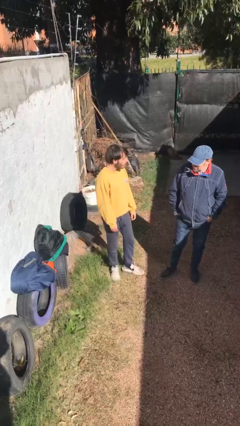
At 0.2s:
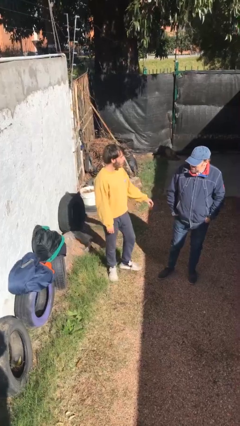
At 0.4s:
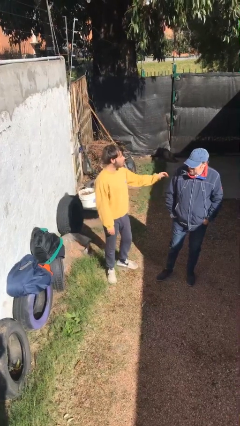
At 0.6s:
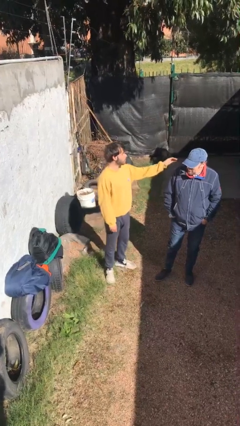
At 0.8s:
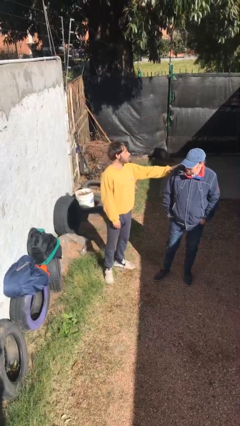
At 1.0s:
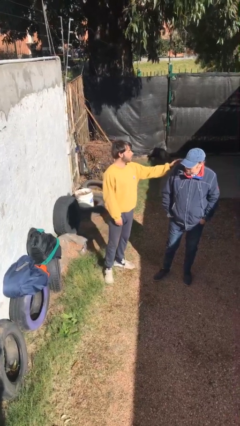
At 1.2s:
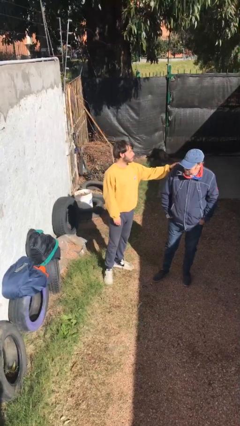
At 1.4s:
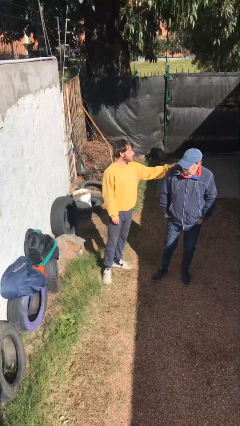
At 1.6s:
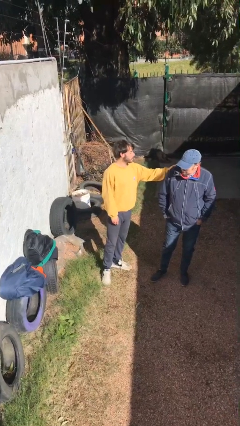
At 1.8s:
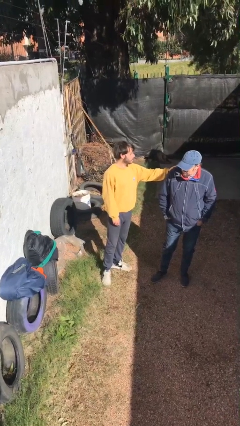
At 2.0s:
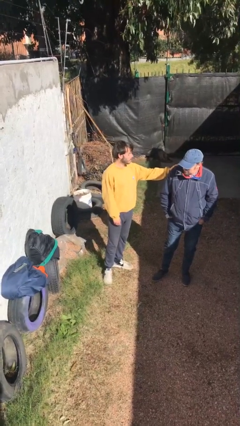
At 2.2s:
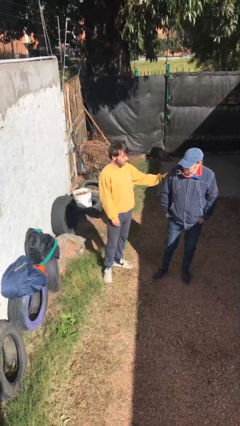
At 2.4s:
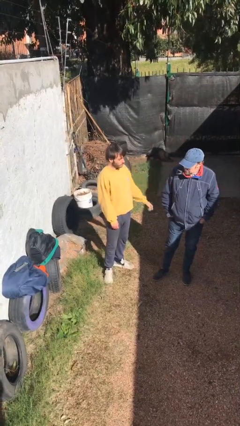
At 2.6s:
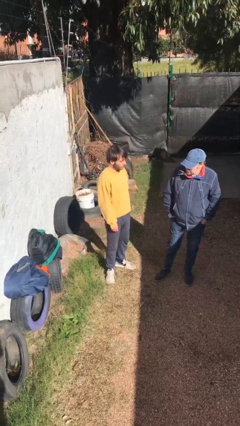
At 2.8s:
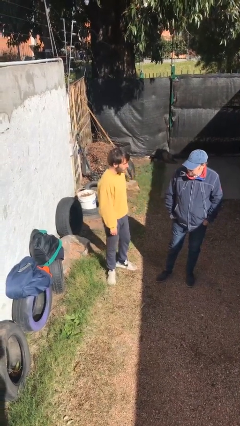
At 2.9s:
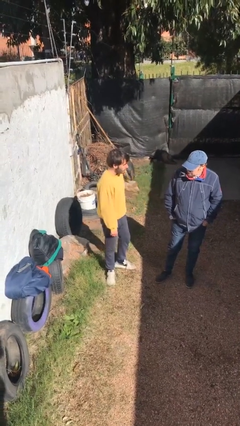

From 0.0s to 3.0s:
person pounds shoulders of person

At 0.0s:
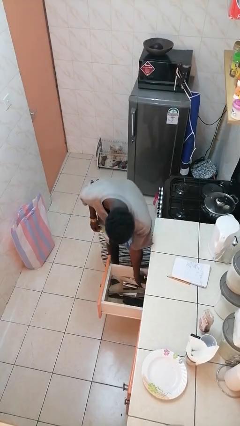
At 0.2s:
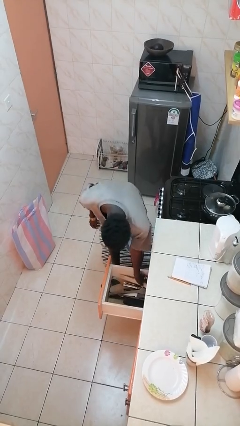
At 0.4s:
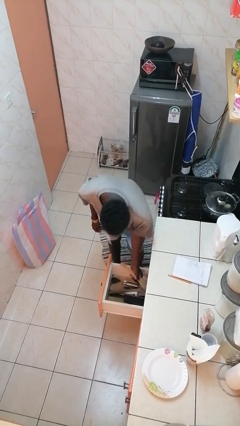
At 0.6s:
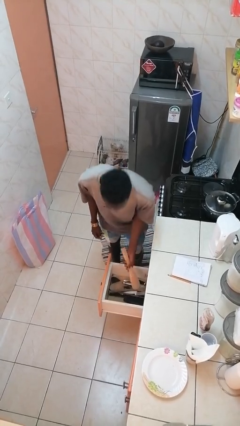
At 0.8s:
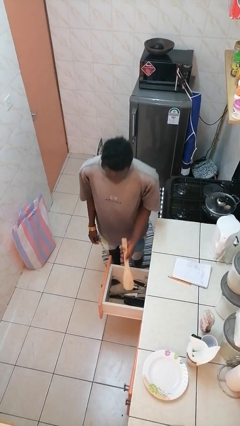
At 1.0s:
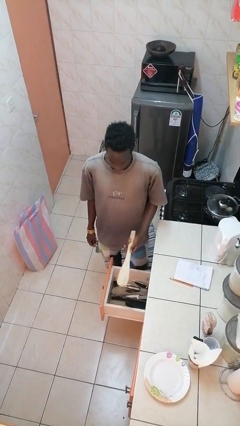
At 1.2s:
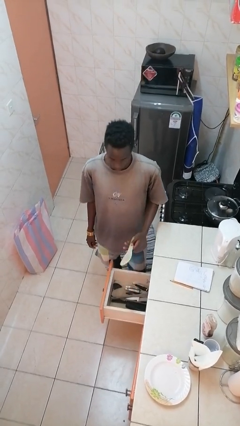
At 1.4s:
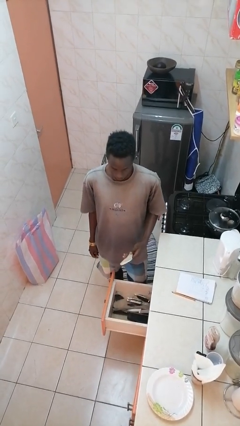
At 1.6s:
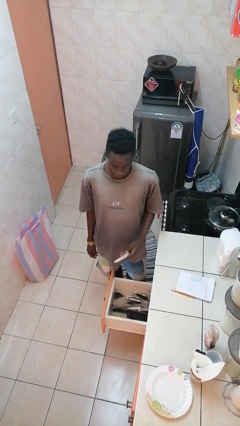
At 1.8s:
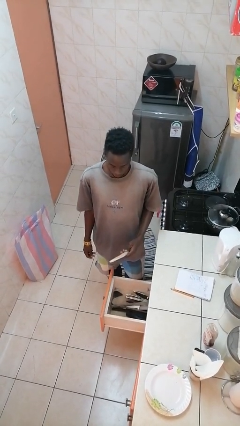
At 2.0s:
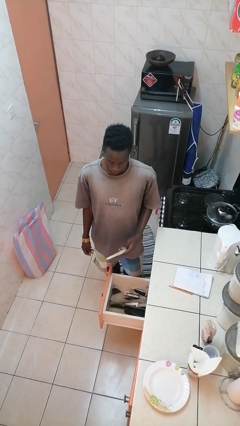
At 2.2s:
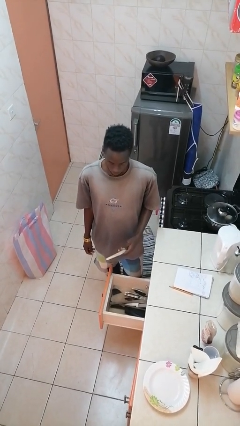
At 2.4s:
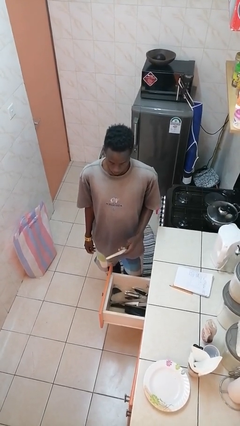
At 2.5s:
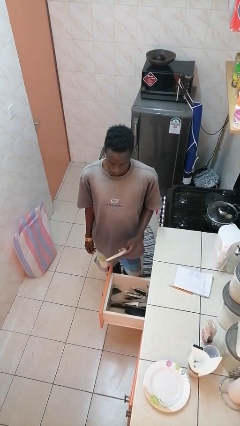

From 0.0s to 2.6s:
person takes object from kitchen drawer

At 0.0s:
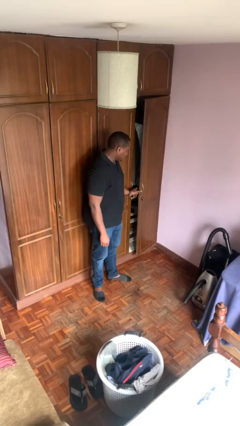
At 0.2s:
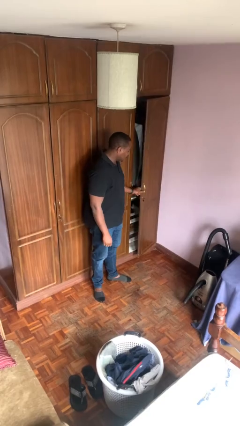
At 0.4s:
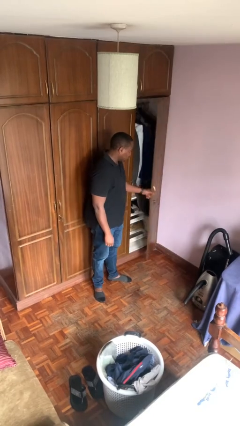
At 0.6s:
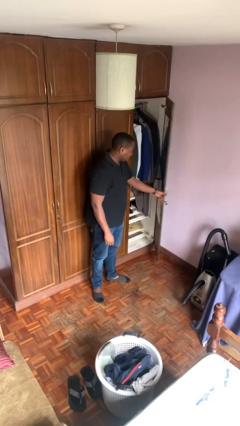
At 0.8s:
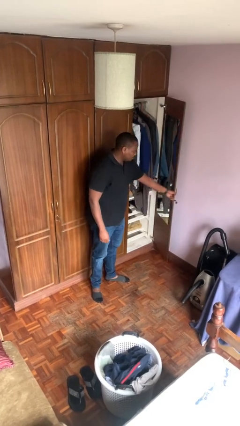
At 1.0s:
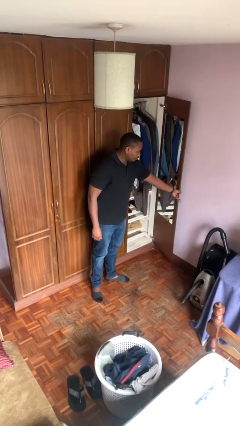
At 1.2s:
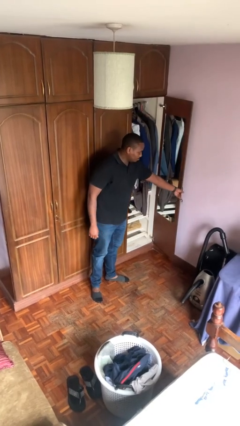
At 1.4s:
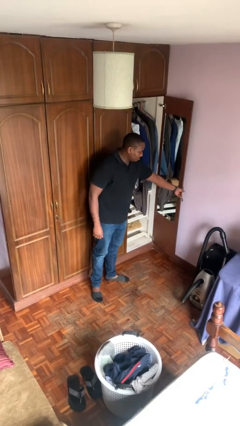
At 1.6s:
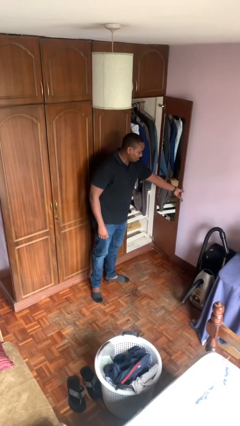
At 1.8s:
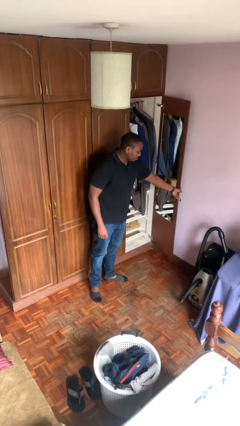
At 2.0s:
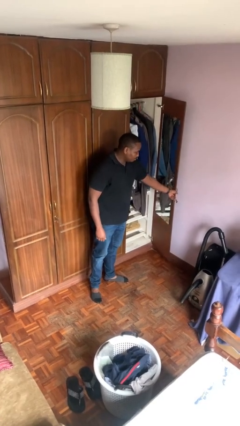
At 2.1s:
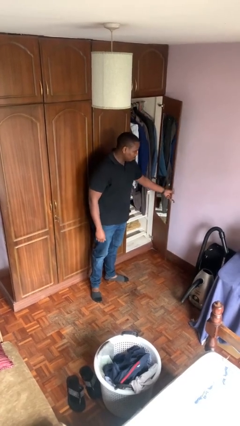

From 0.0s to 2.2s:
person opens closet door

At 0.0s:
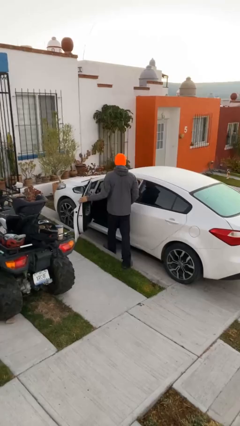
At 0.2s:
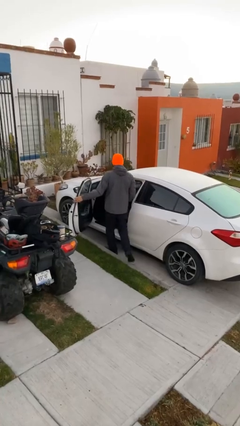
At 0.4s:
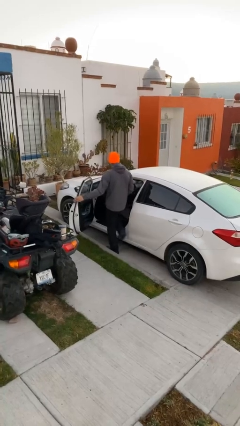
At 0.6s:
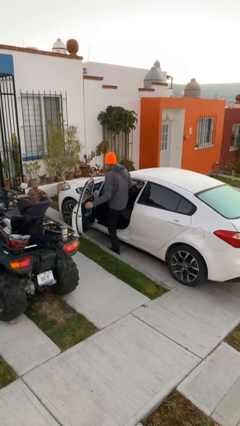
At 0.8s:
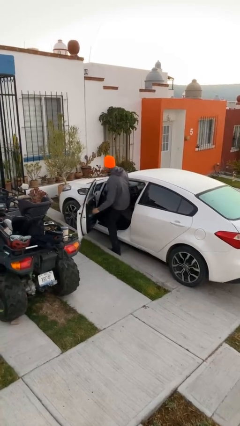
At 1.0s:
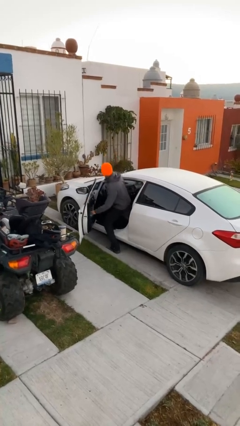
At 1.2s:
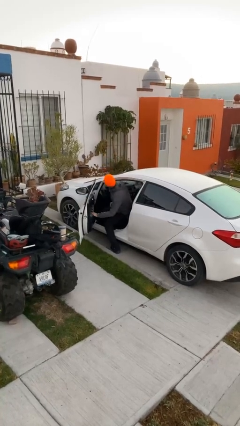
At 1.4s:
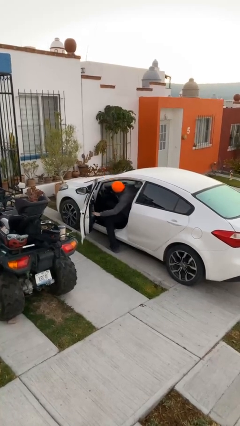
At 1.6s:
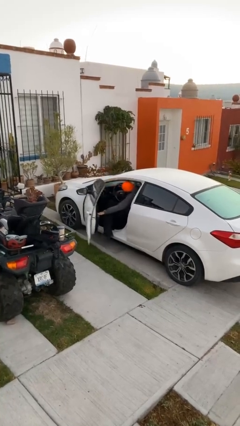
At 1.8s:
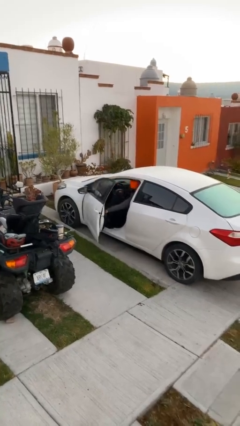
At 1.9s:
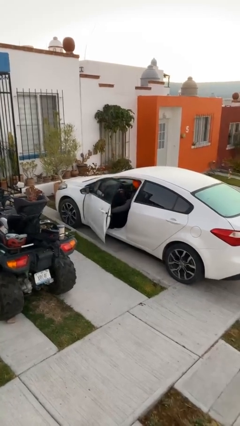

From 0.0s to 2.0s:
person enters car

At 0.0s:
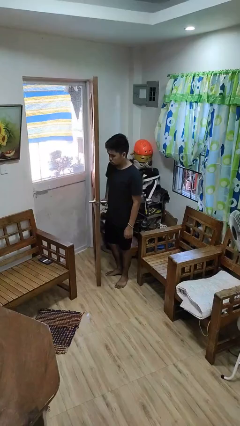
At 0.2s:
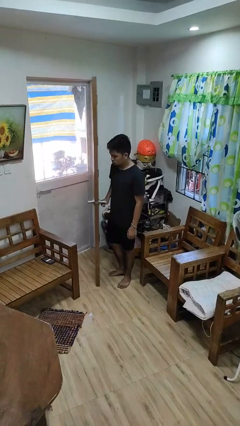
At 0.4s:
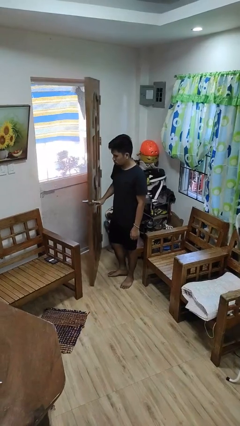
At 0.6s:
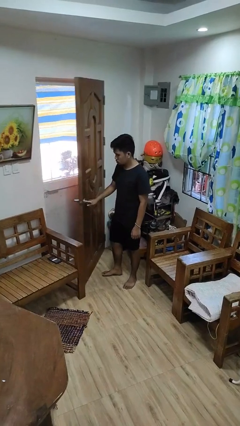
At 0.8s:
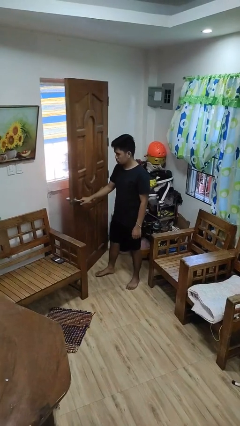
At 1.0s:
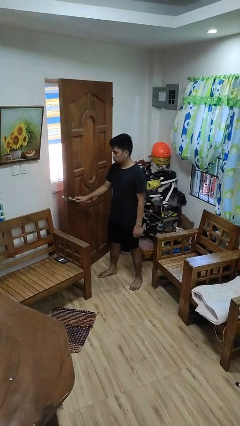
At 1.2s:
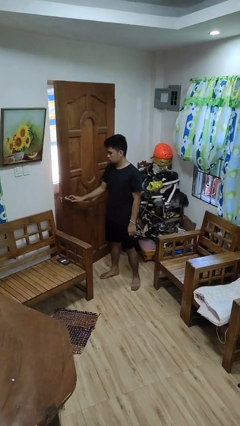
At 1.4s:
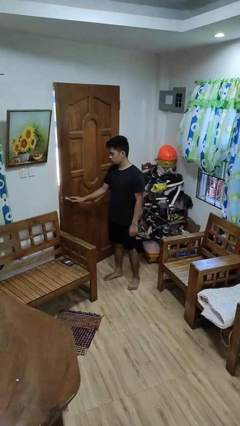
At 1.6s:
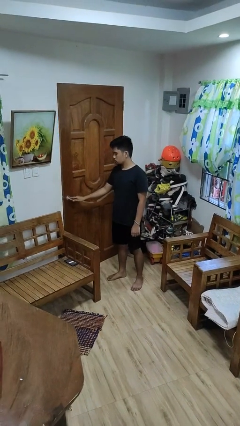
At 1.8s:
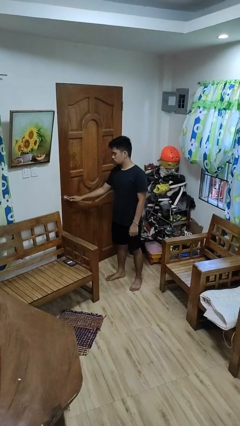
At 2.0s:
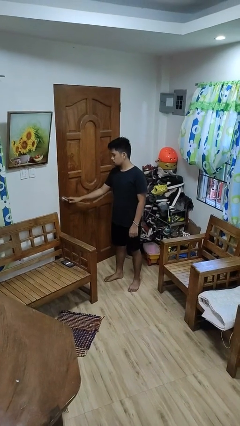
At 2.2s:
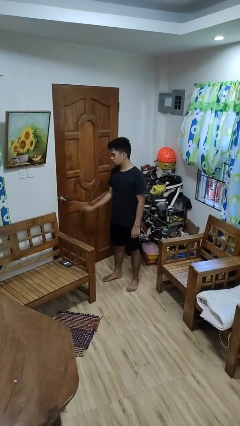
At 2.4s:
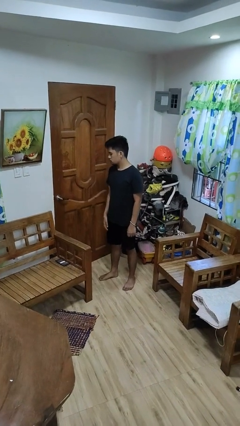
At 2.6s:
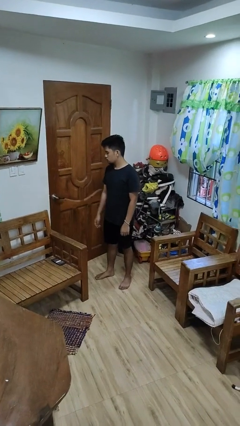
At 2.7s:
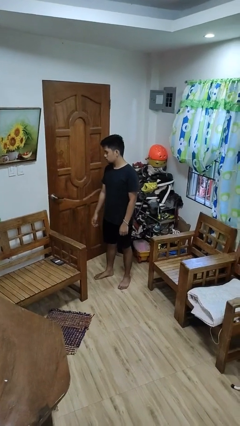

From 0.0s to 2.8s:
person closes facility door

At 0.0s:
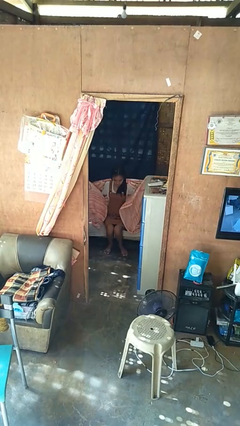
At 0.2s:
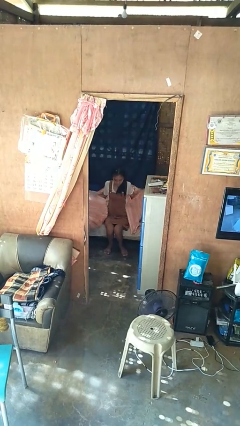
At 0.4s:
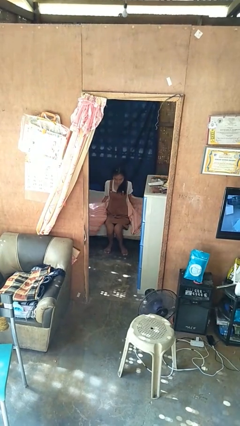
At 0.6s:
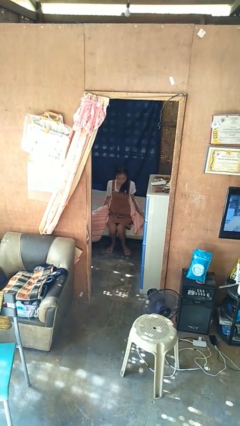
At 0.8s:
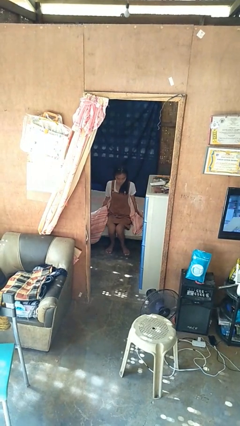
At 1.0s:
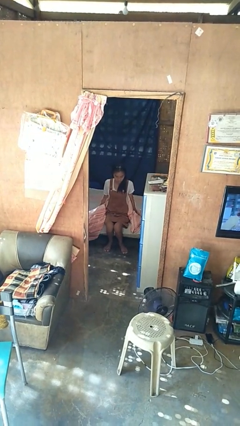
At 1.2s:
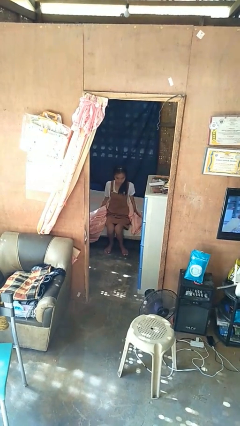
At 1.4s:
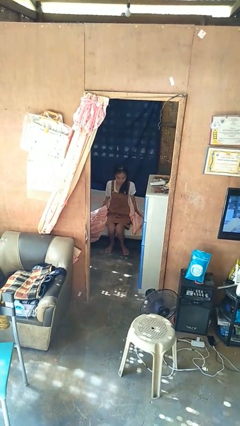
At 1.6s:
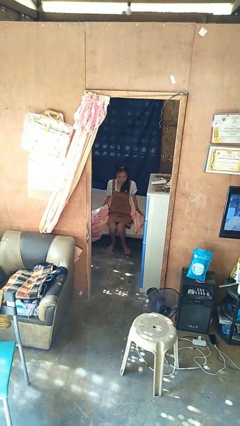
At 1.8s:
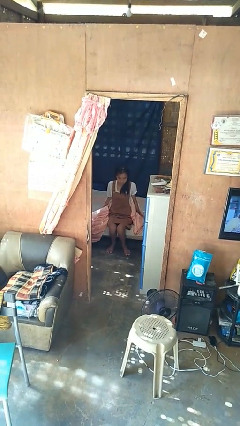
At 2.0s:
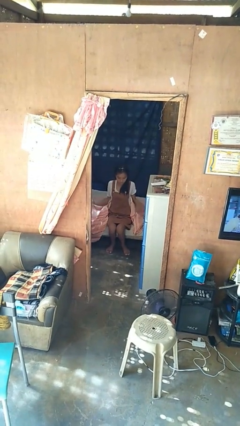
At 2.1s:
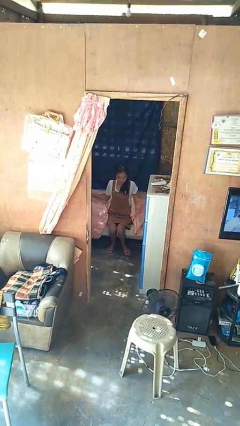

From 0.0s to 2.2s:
person uncovers with blanket

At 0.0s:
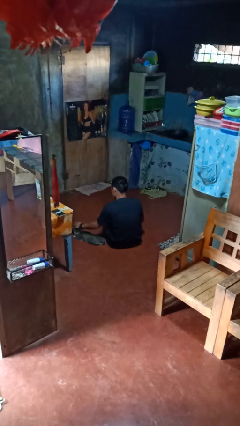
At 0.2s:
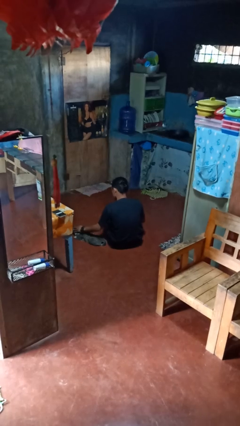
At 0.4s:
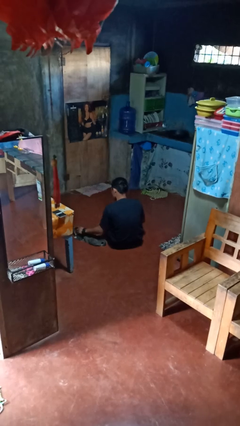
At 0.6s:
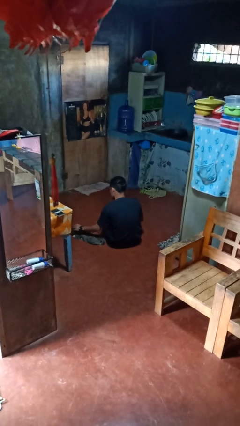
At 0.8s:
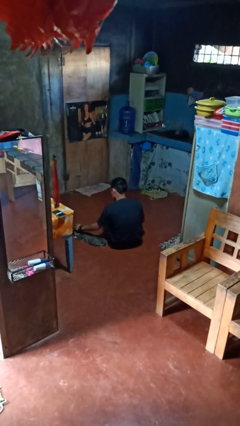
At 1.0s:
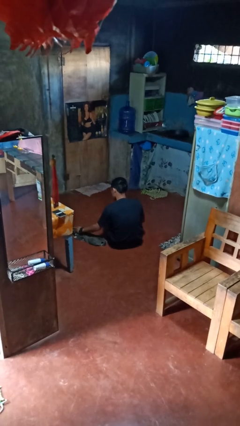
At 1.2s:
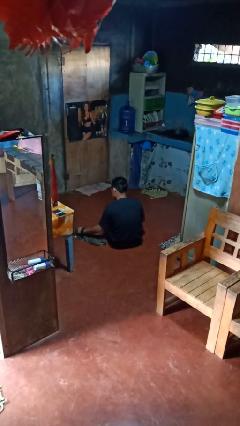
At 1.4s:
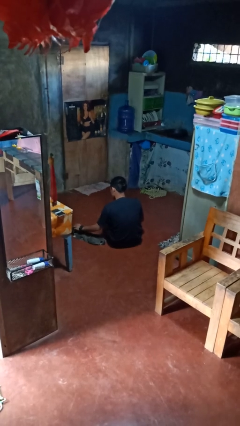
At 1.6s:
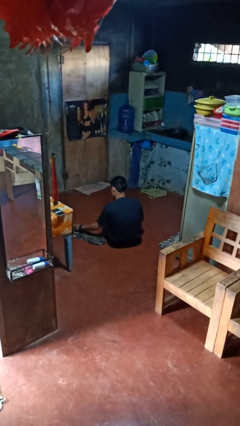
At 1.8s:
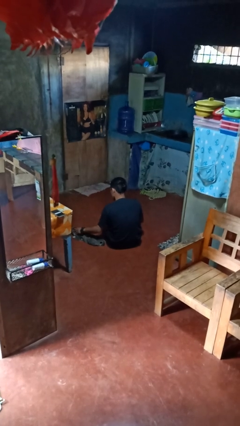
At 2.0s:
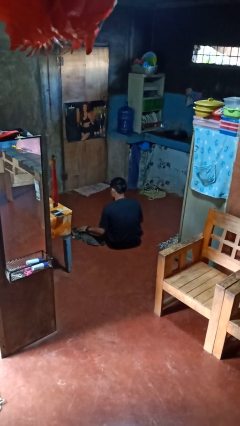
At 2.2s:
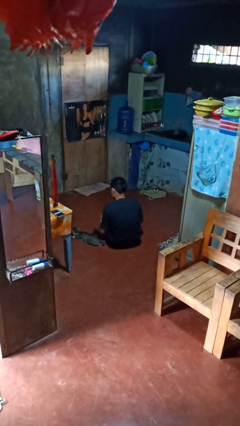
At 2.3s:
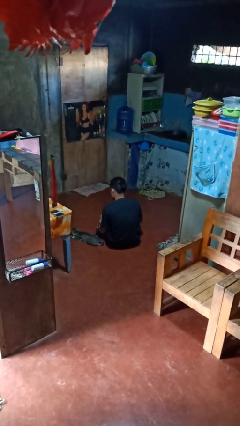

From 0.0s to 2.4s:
person pets cat
